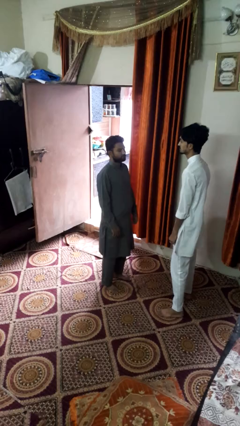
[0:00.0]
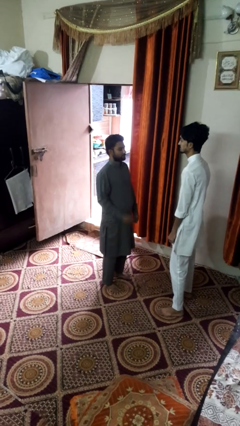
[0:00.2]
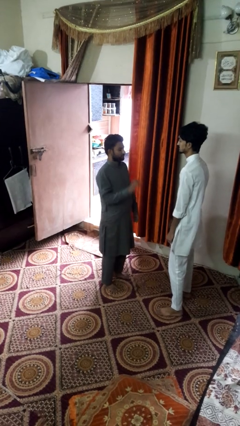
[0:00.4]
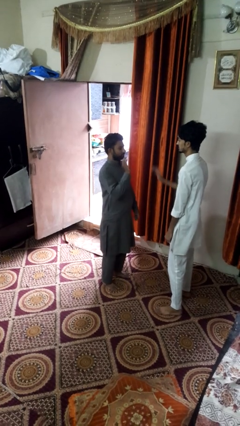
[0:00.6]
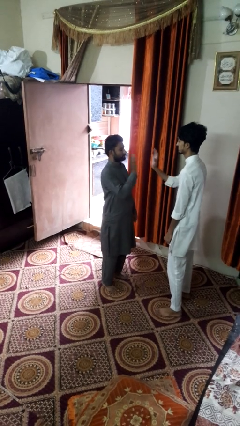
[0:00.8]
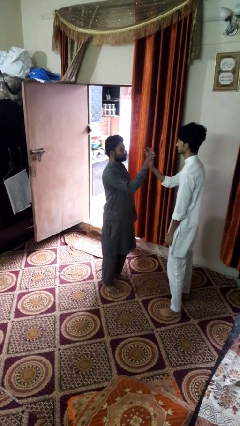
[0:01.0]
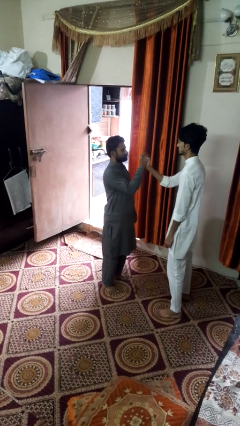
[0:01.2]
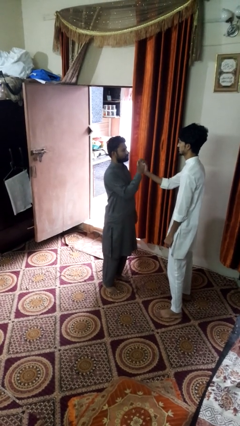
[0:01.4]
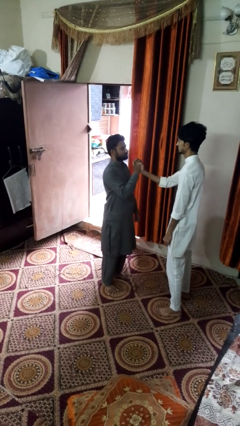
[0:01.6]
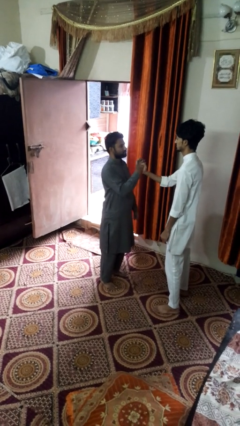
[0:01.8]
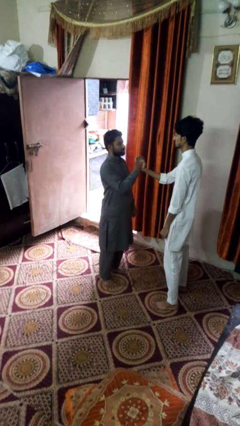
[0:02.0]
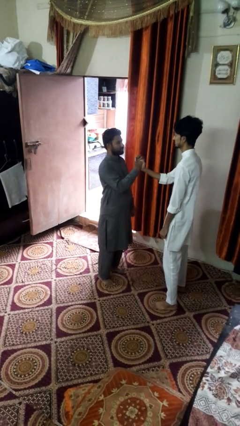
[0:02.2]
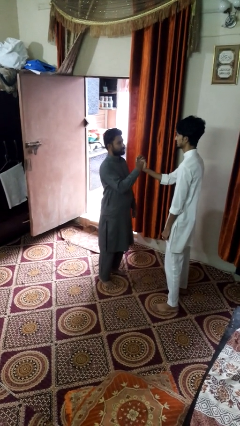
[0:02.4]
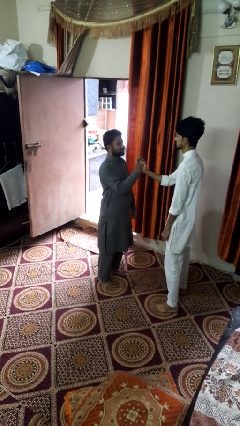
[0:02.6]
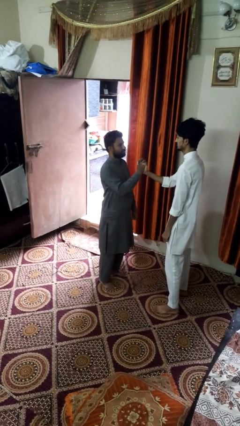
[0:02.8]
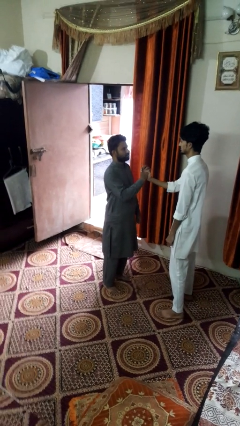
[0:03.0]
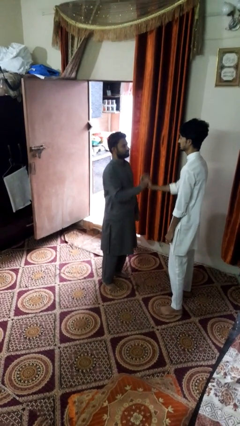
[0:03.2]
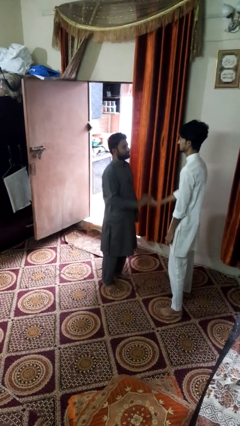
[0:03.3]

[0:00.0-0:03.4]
person highfives hand

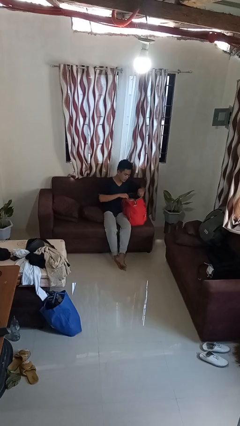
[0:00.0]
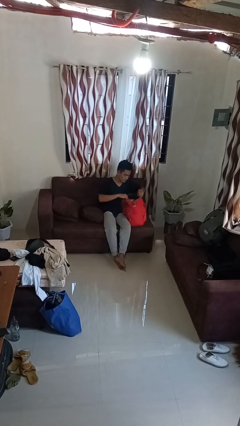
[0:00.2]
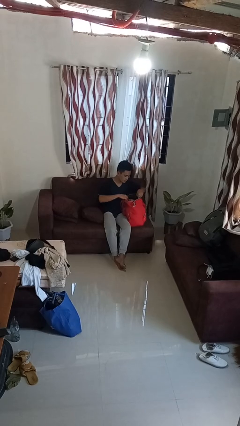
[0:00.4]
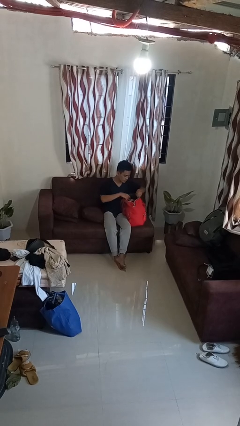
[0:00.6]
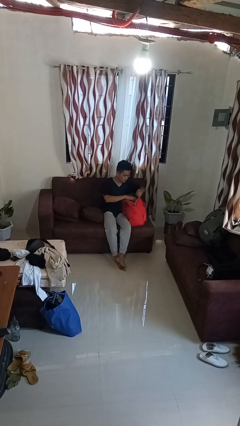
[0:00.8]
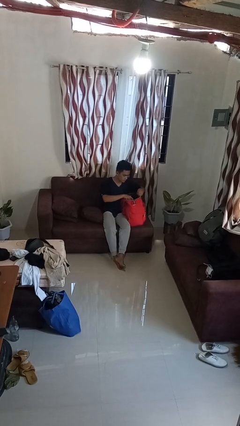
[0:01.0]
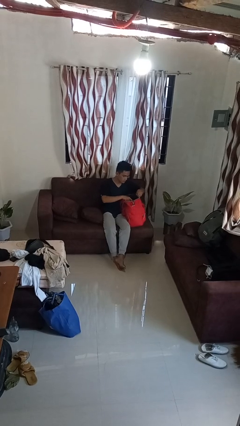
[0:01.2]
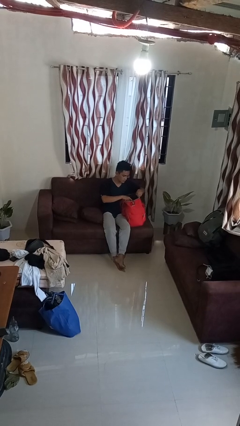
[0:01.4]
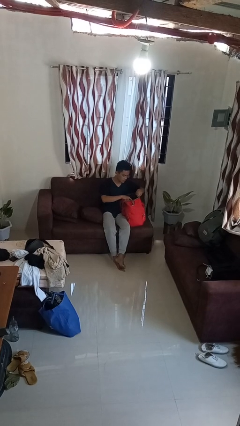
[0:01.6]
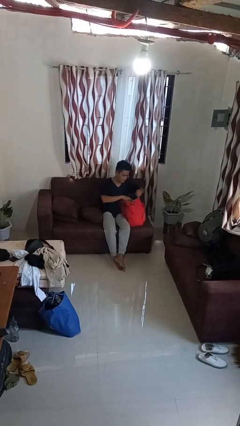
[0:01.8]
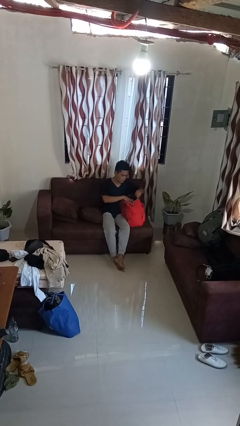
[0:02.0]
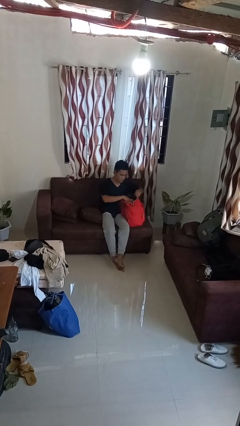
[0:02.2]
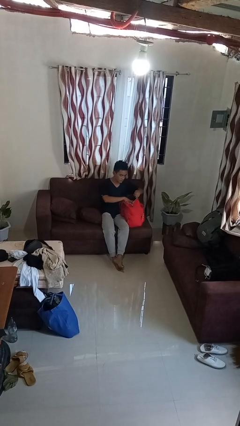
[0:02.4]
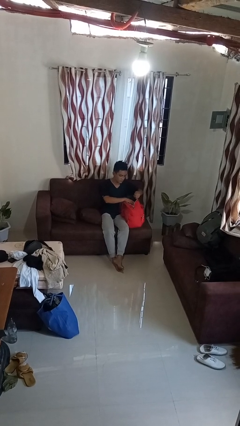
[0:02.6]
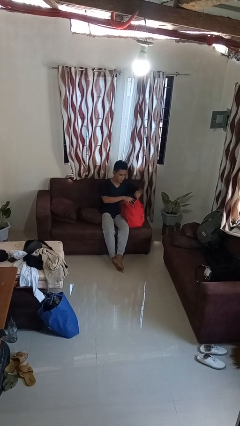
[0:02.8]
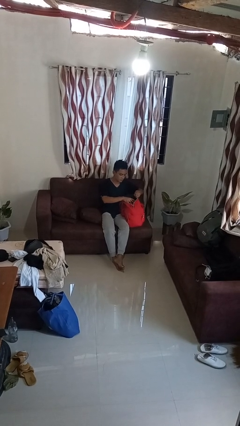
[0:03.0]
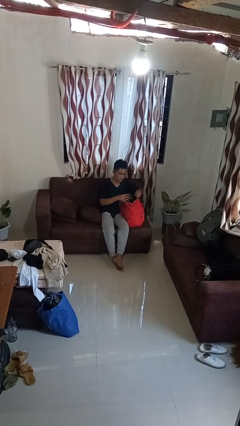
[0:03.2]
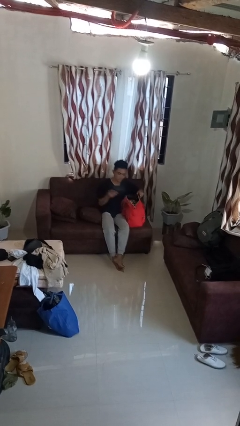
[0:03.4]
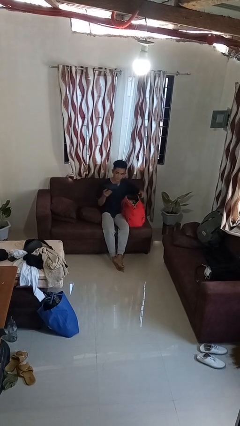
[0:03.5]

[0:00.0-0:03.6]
person searches in backpack

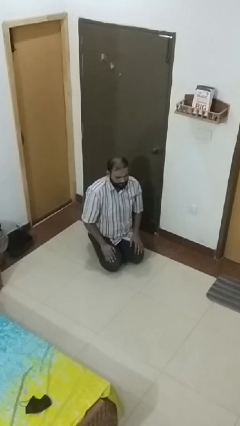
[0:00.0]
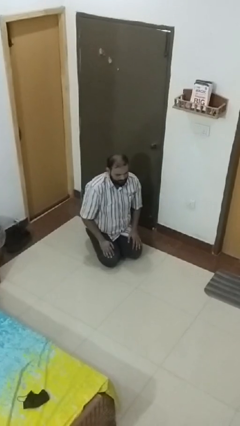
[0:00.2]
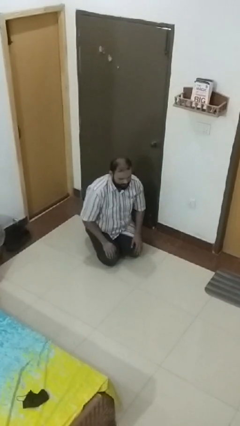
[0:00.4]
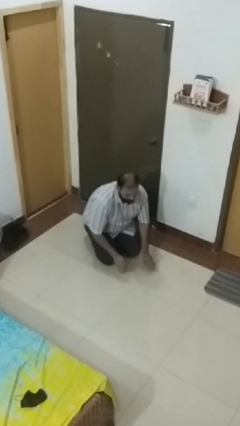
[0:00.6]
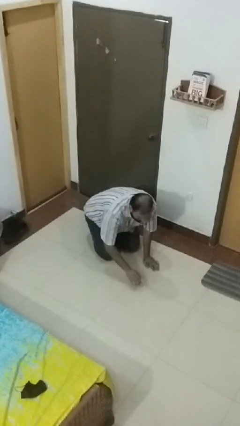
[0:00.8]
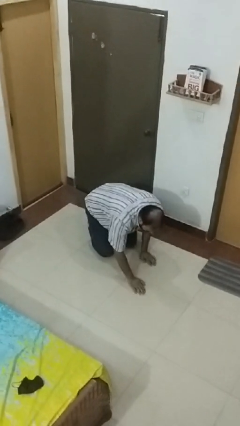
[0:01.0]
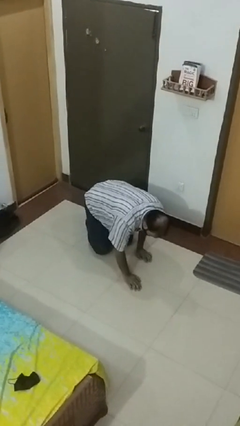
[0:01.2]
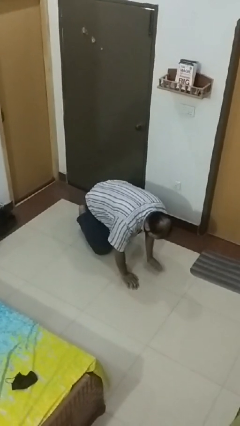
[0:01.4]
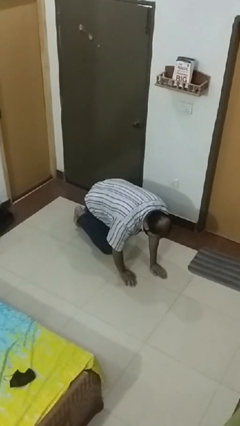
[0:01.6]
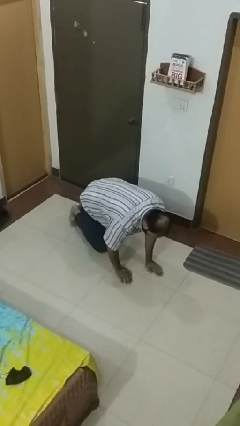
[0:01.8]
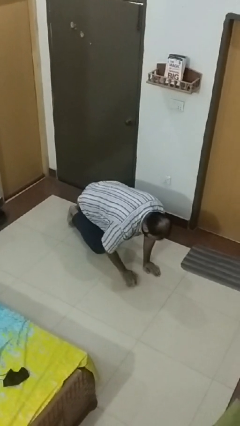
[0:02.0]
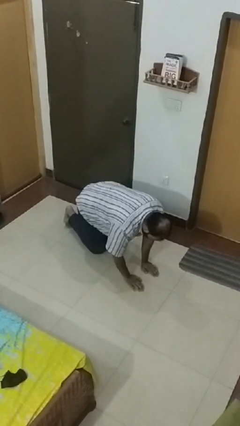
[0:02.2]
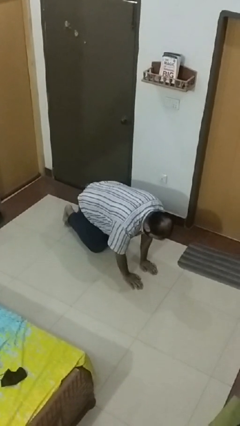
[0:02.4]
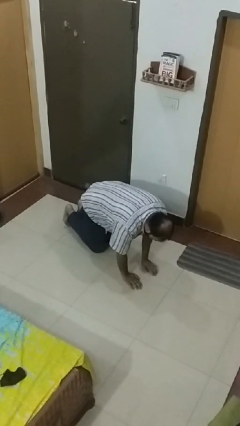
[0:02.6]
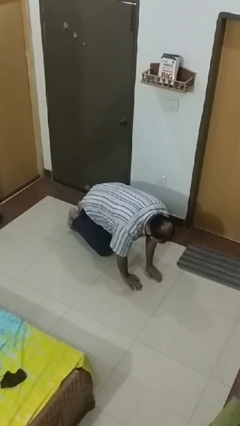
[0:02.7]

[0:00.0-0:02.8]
person crawls

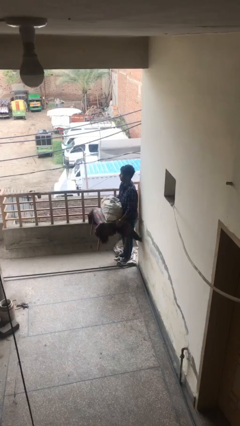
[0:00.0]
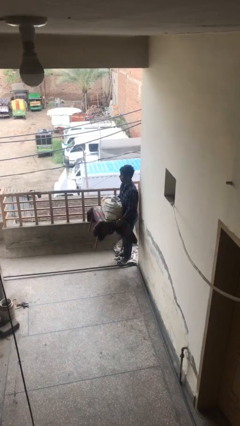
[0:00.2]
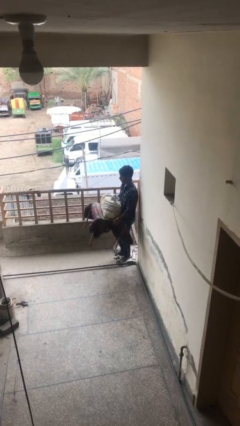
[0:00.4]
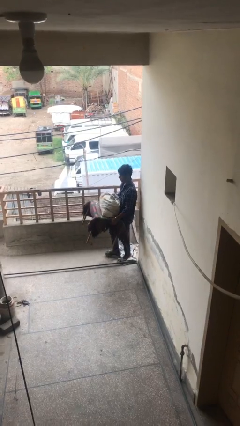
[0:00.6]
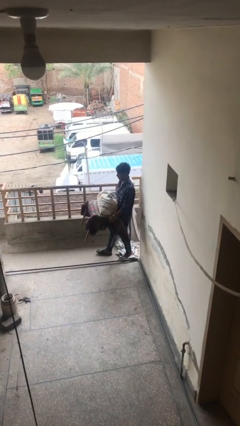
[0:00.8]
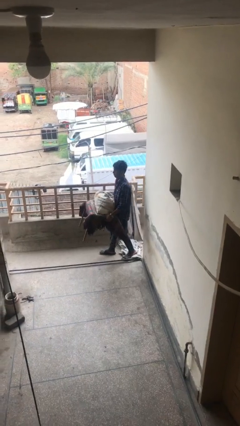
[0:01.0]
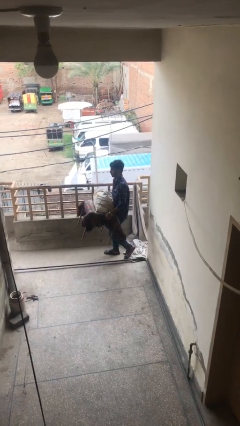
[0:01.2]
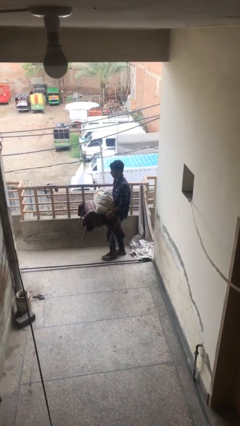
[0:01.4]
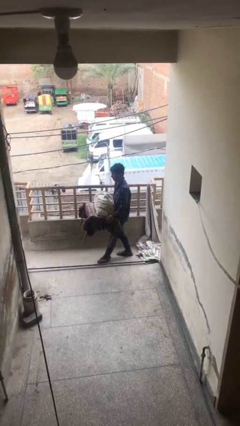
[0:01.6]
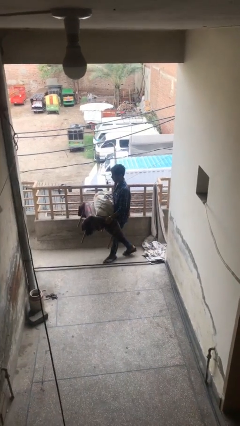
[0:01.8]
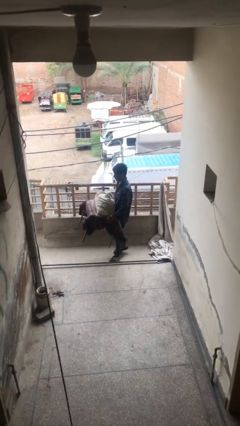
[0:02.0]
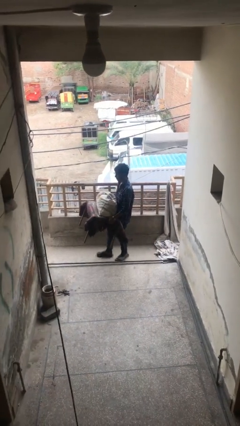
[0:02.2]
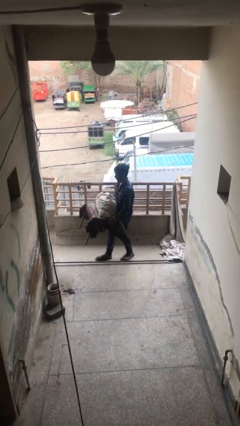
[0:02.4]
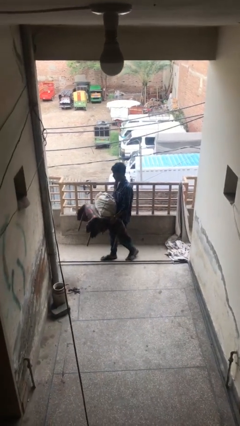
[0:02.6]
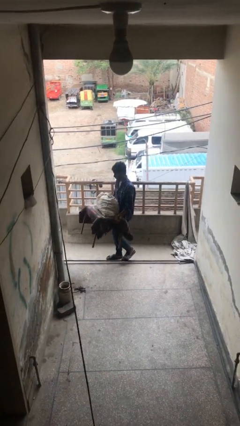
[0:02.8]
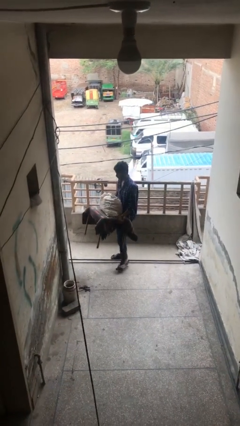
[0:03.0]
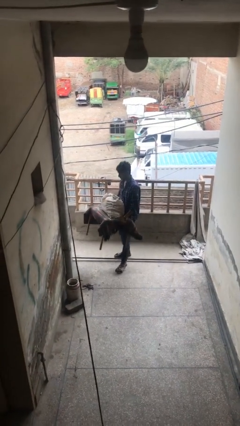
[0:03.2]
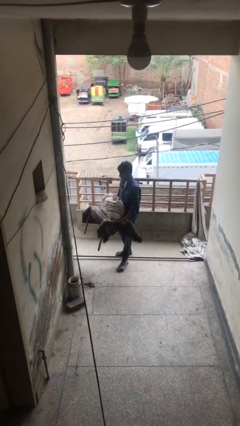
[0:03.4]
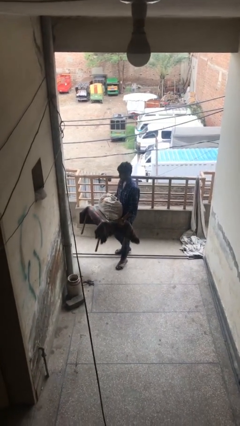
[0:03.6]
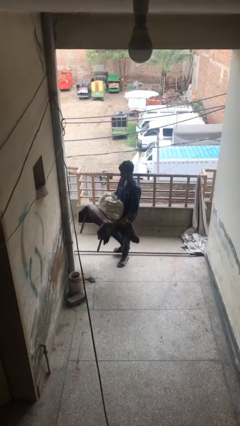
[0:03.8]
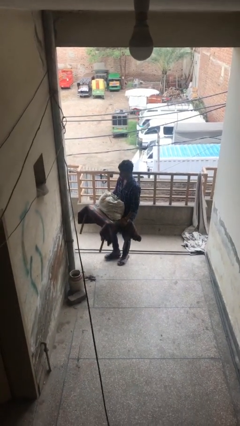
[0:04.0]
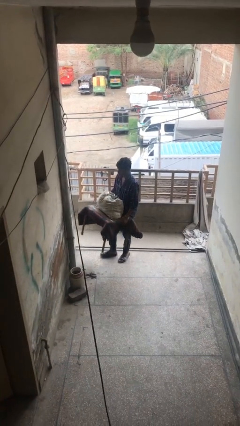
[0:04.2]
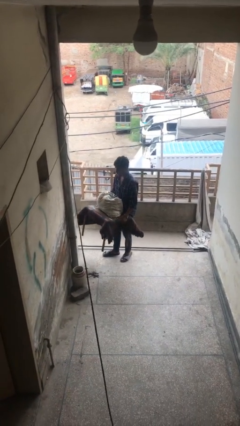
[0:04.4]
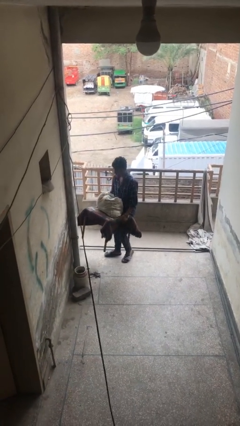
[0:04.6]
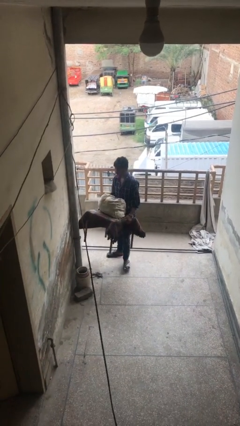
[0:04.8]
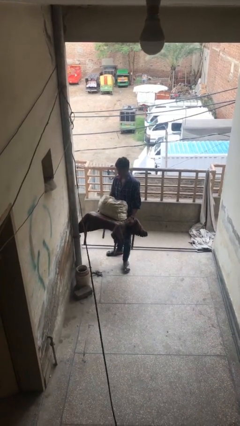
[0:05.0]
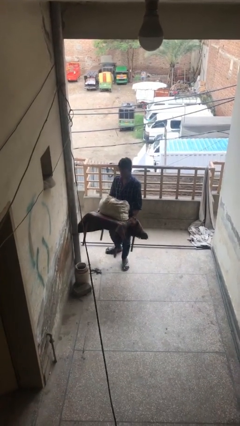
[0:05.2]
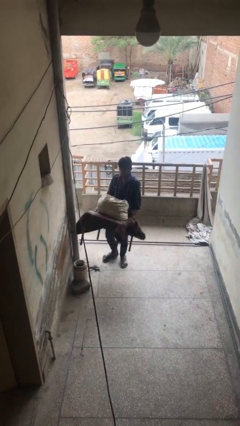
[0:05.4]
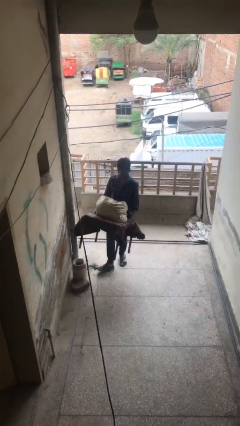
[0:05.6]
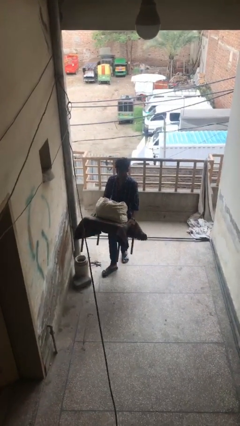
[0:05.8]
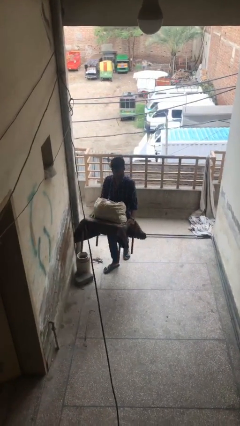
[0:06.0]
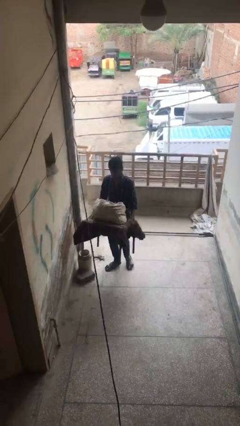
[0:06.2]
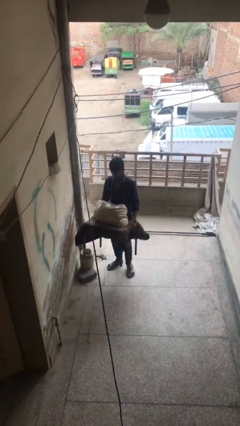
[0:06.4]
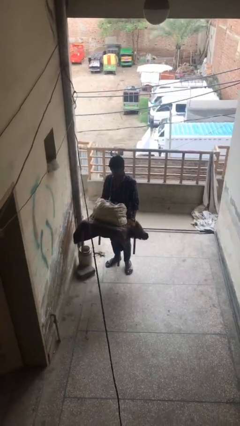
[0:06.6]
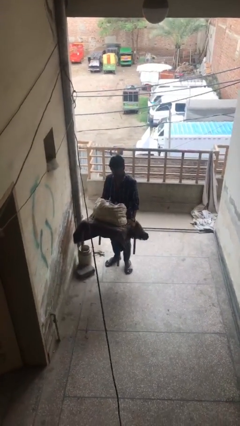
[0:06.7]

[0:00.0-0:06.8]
person carries heavy object

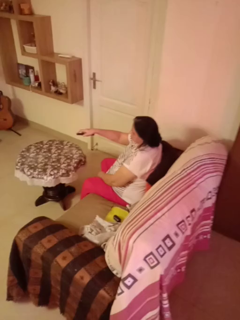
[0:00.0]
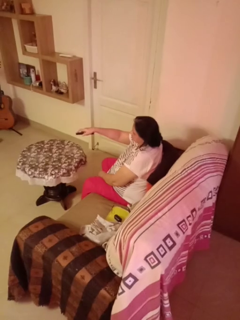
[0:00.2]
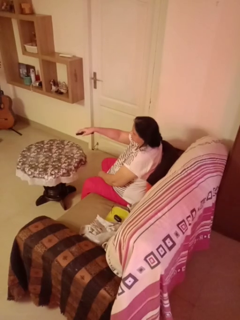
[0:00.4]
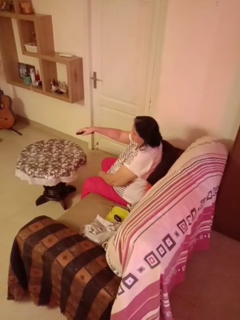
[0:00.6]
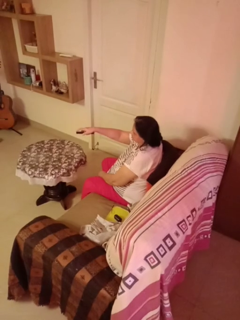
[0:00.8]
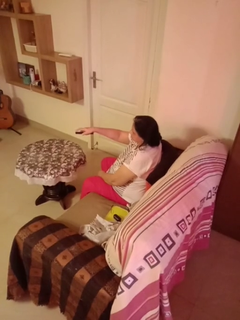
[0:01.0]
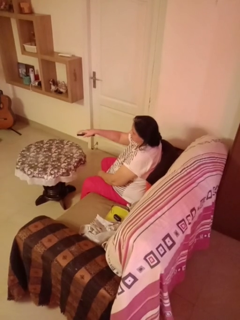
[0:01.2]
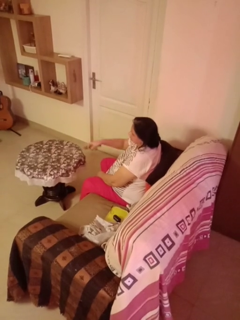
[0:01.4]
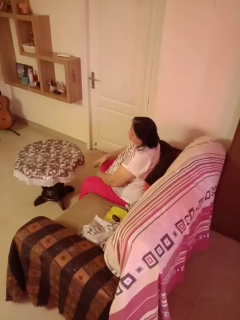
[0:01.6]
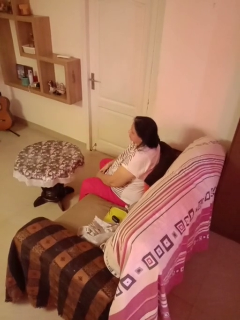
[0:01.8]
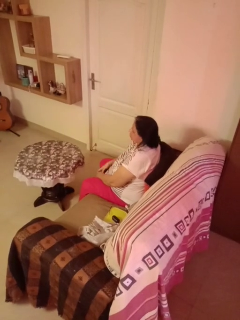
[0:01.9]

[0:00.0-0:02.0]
person uses television remote
